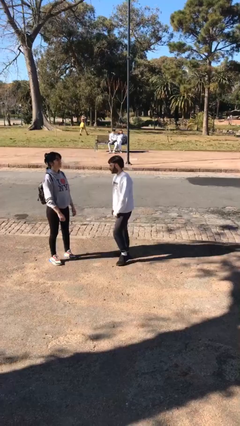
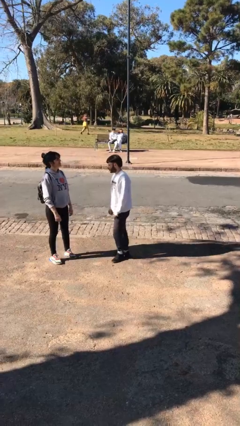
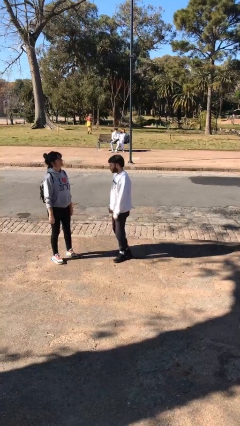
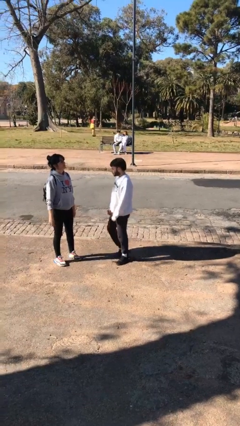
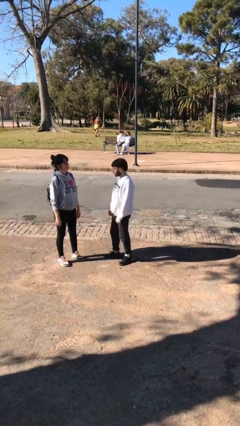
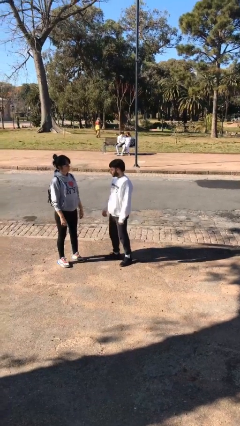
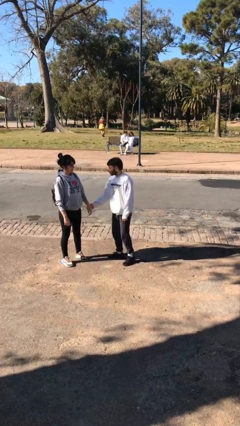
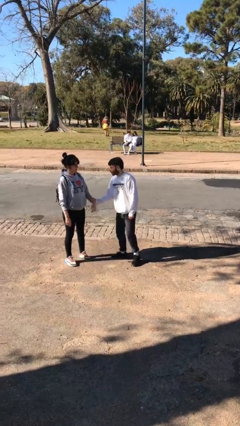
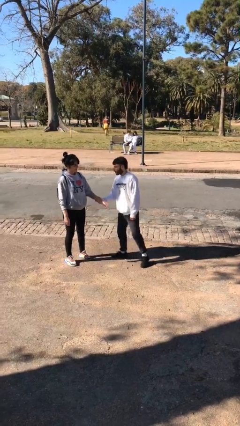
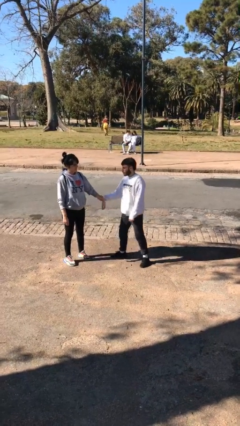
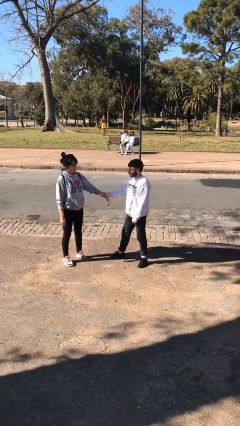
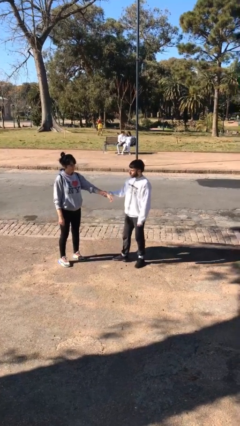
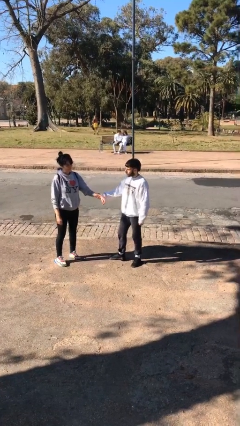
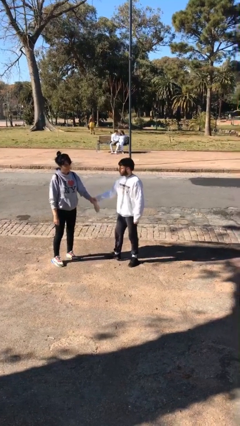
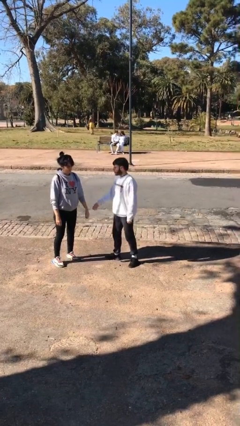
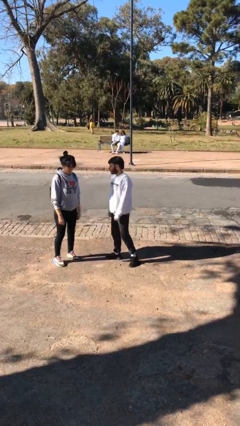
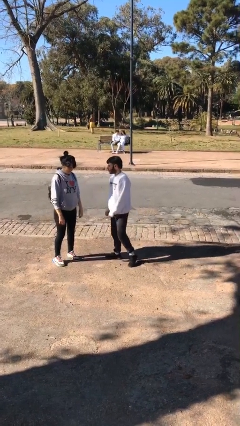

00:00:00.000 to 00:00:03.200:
person grabs person by forearm

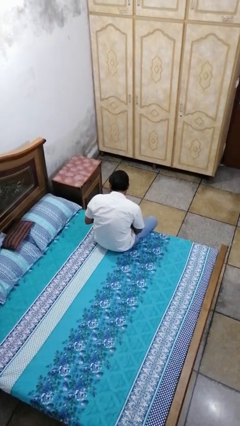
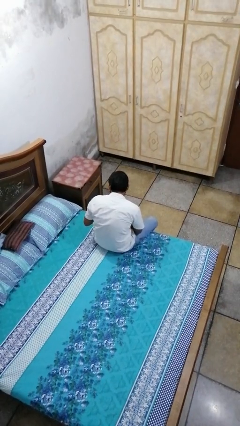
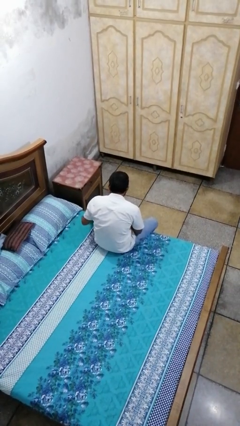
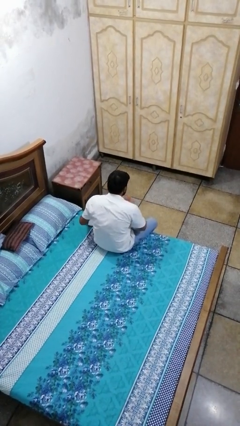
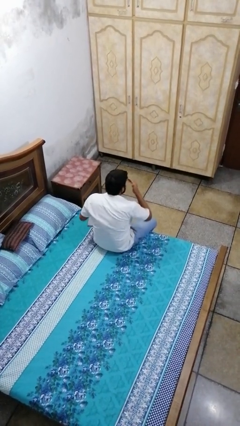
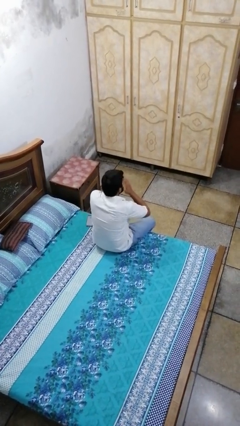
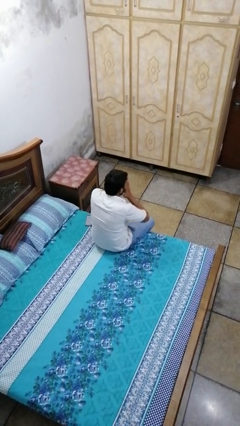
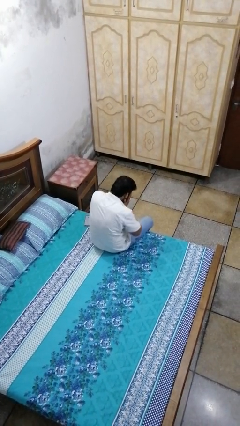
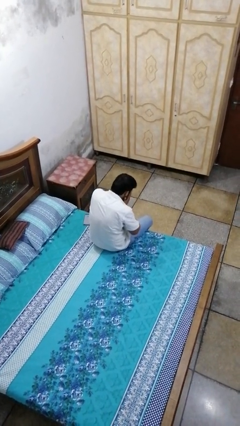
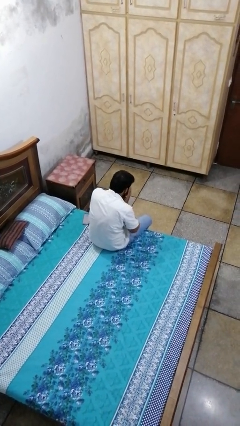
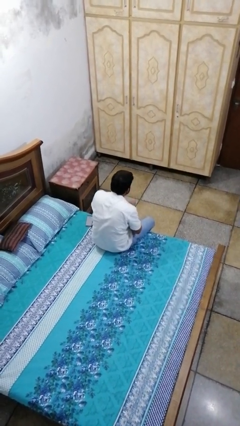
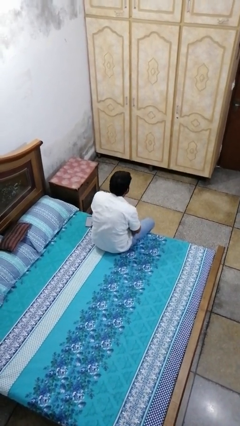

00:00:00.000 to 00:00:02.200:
person sneezes into hand

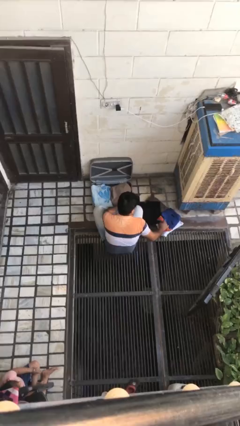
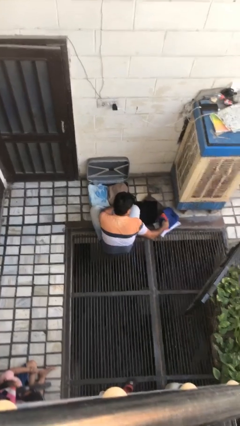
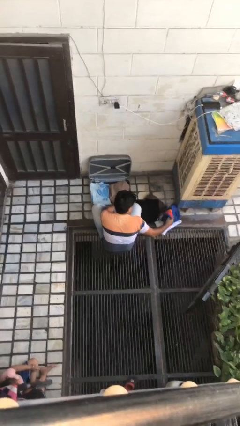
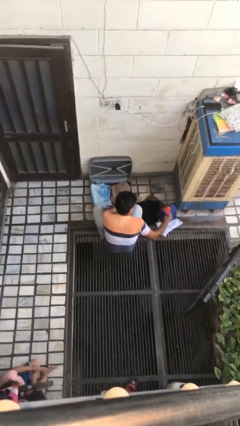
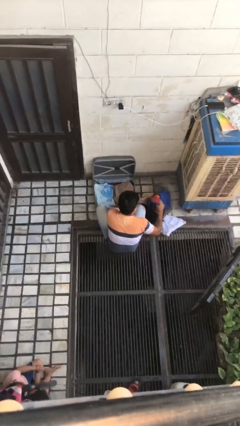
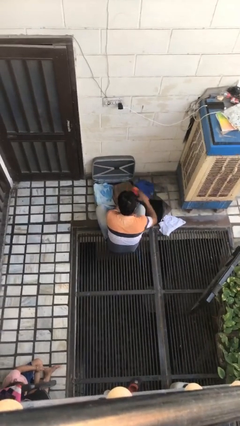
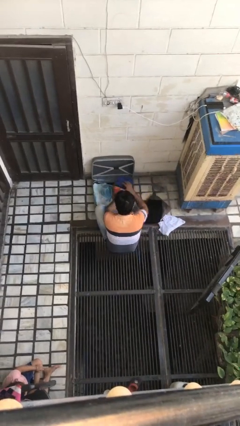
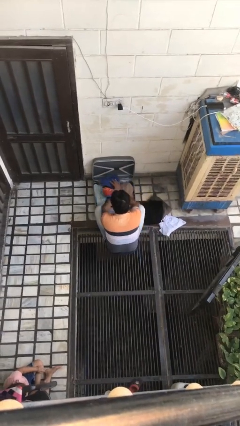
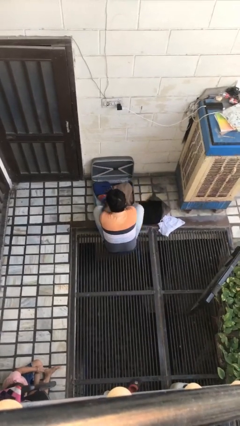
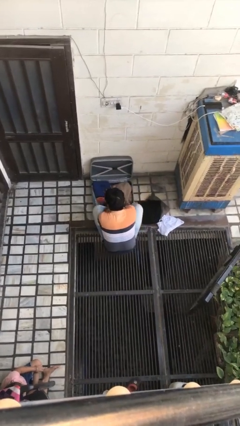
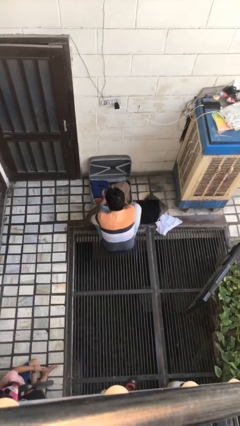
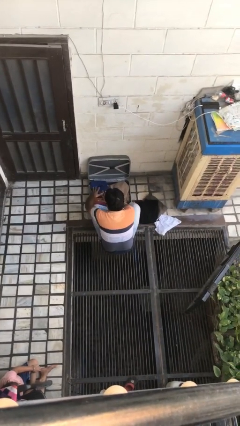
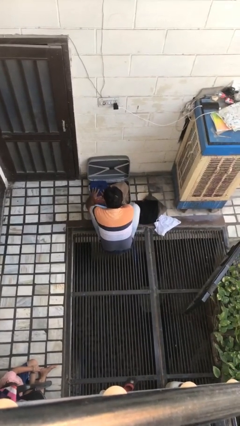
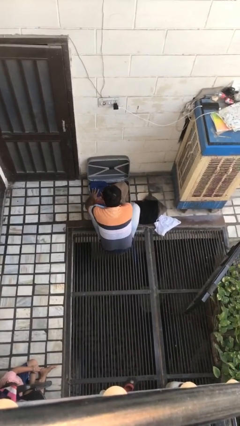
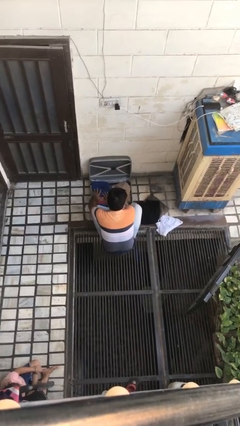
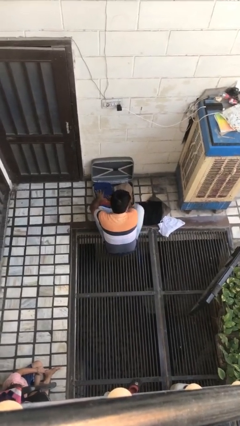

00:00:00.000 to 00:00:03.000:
person loads clothes into suitcase

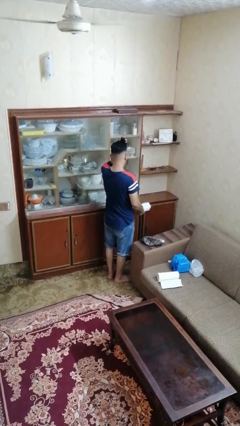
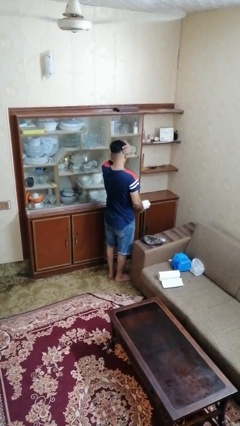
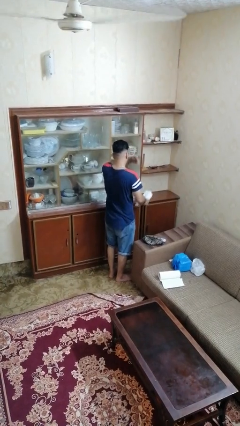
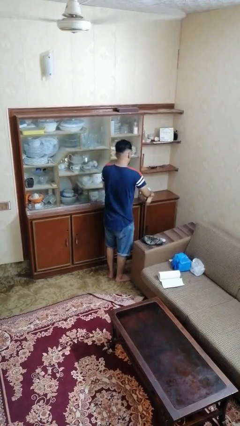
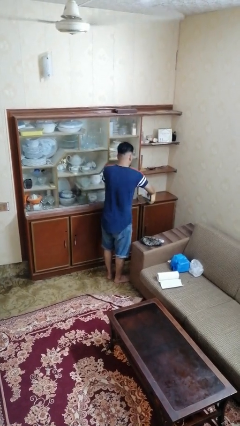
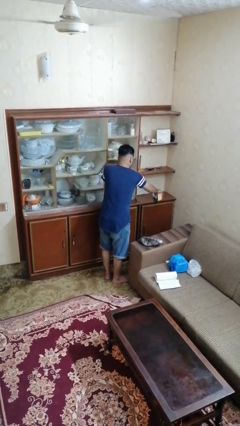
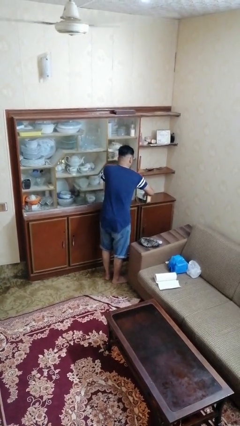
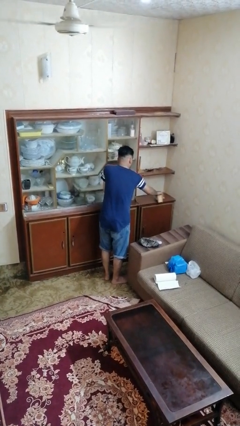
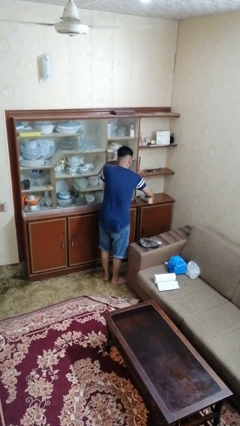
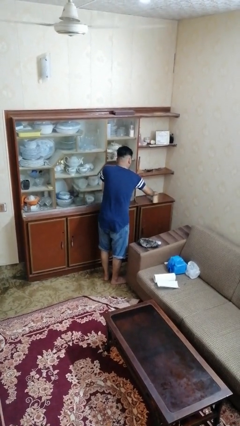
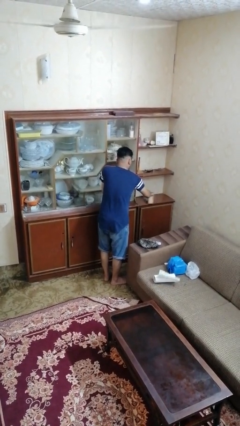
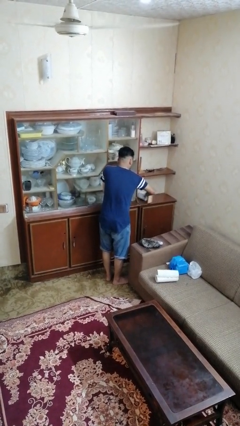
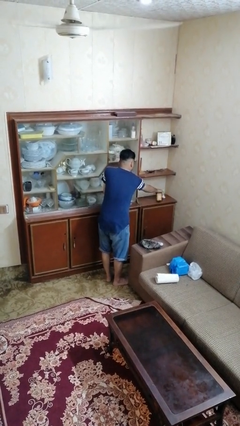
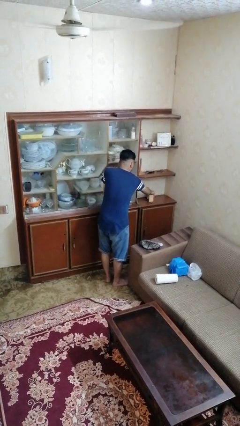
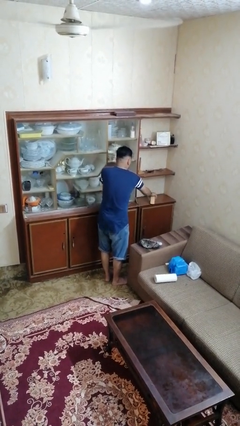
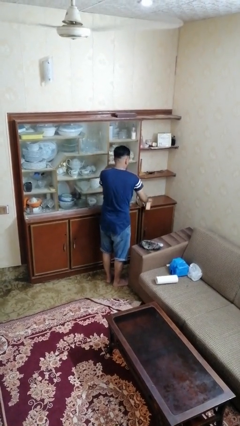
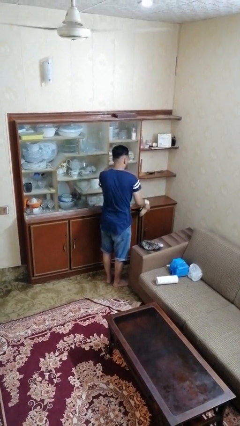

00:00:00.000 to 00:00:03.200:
person dusts furniture

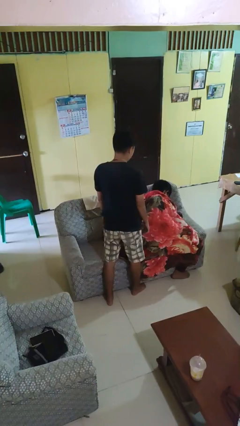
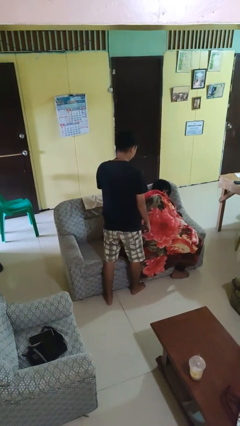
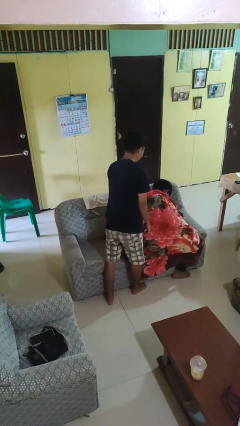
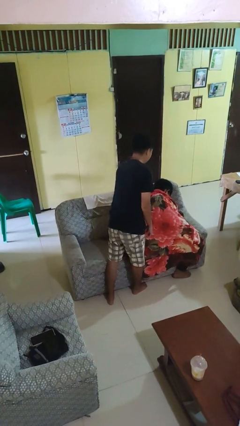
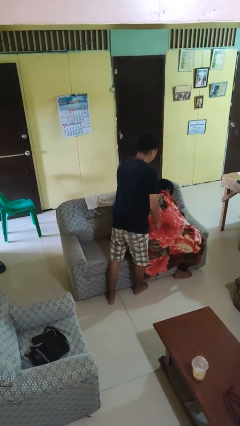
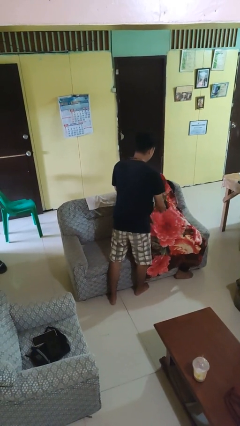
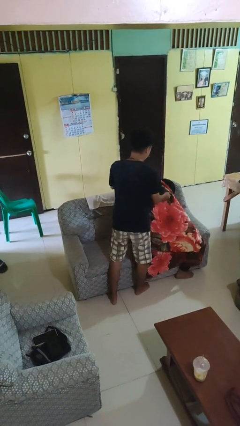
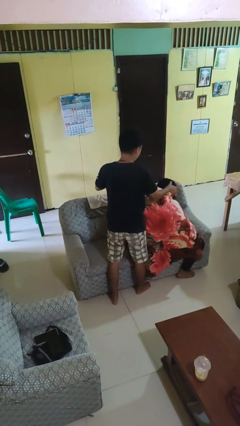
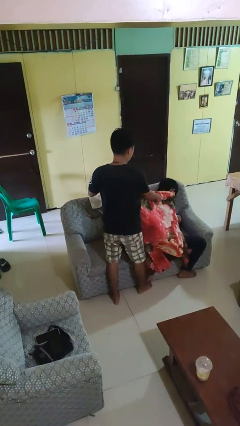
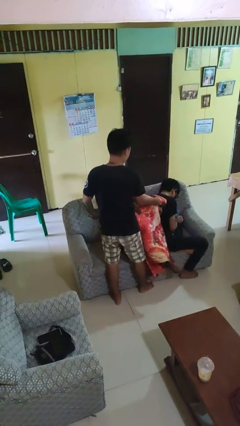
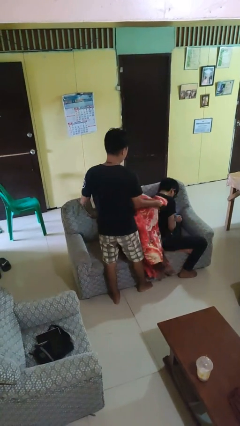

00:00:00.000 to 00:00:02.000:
person uncovers friend with blanket

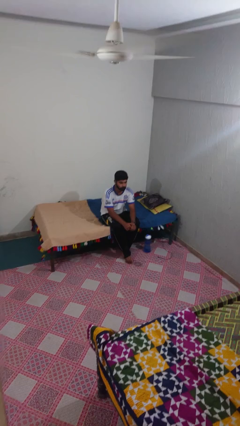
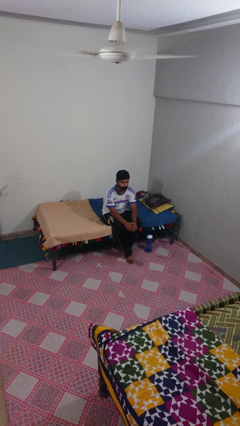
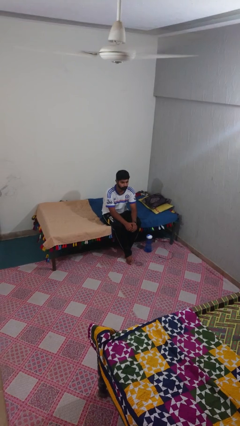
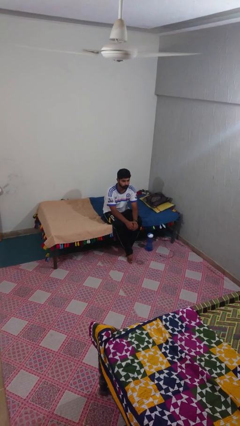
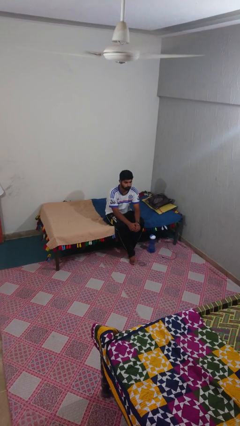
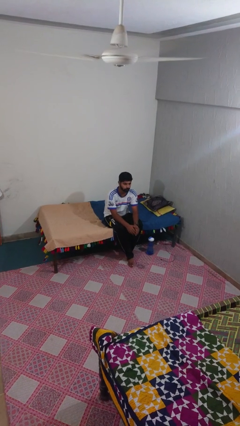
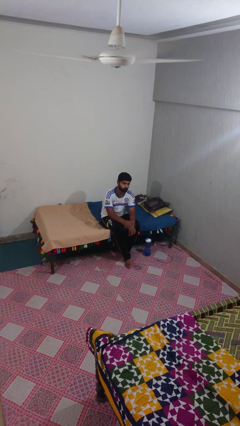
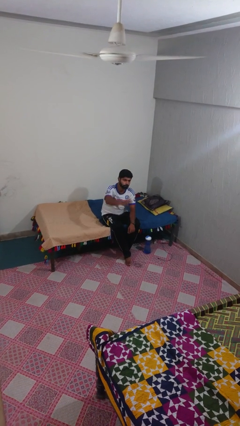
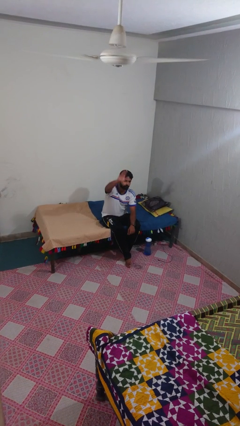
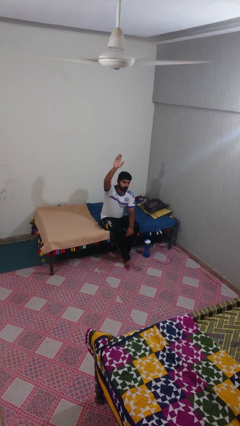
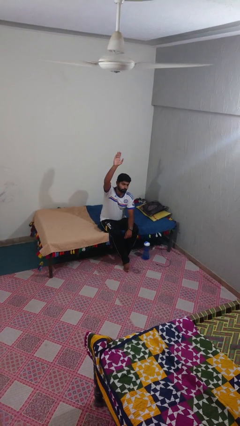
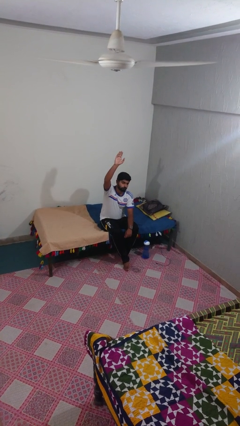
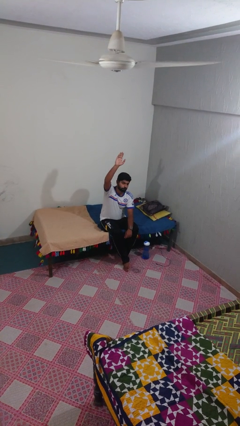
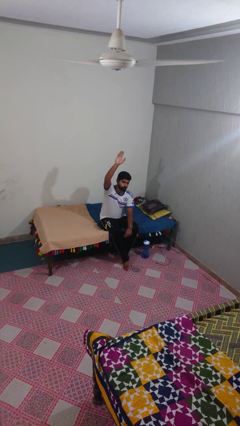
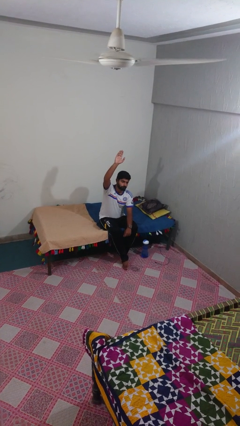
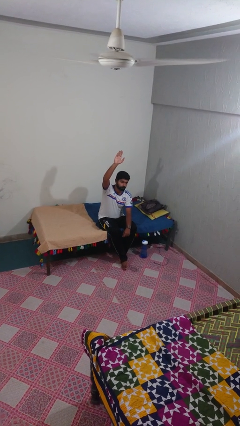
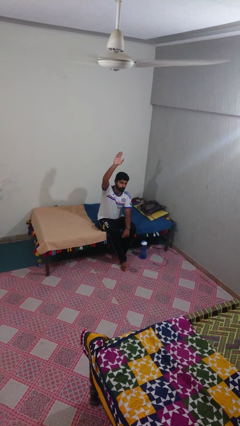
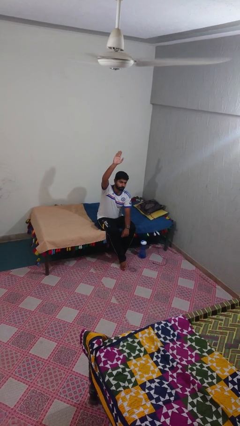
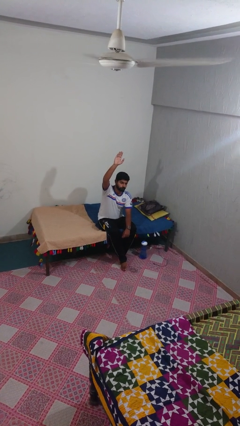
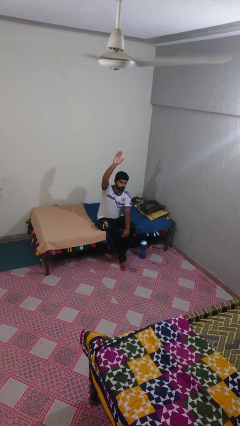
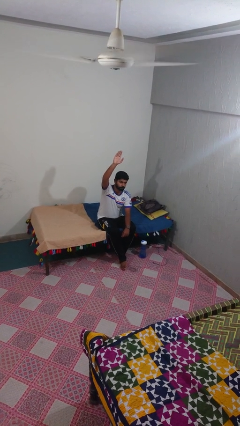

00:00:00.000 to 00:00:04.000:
person gestures raise hand
